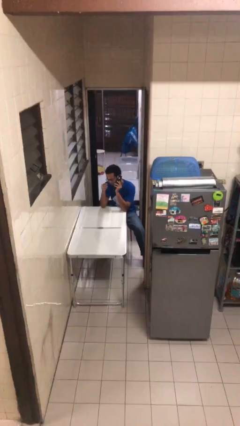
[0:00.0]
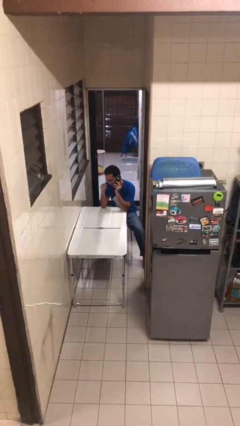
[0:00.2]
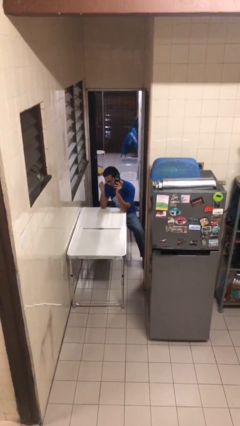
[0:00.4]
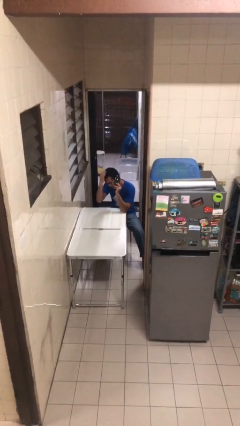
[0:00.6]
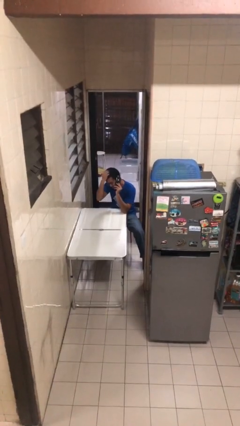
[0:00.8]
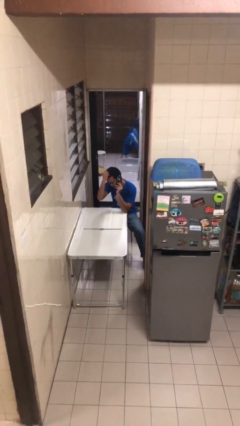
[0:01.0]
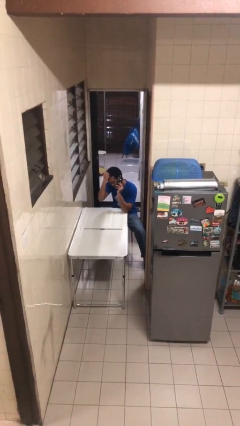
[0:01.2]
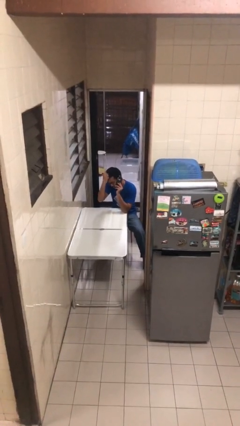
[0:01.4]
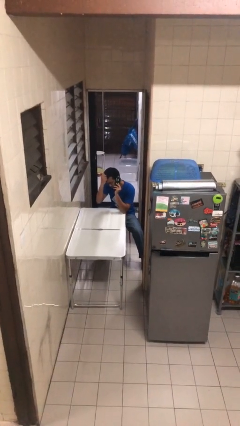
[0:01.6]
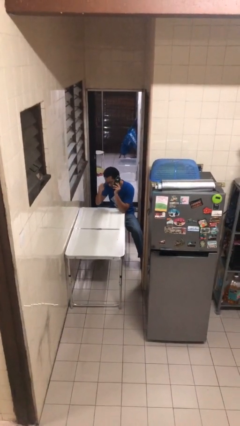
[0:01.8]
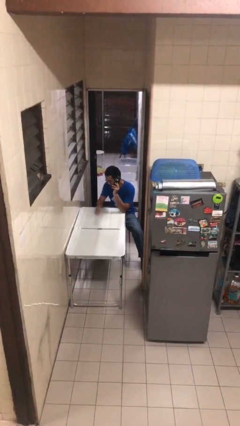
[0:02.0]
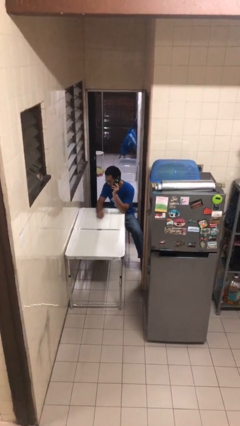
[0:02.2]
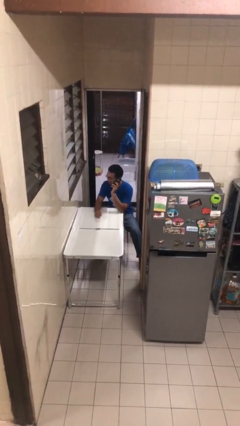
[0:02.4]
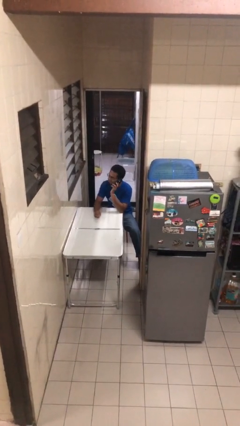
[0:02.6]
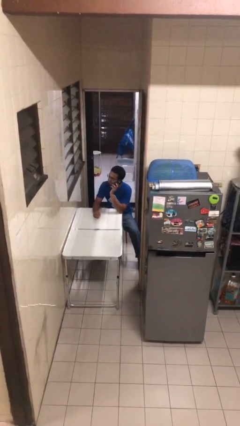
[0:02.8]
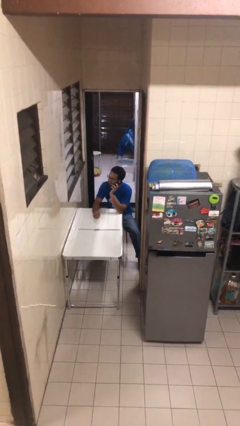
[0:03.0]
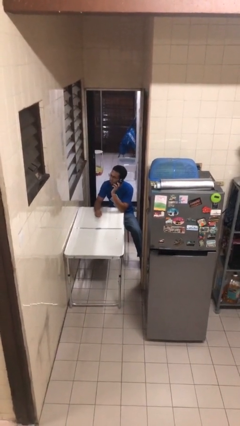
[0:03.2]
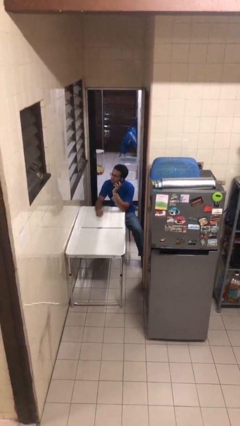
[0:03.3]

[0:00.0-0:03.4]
person talks on phone

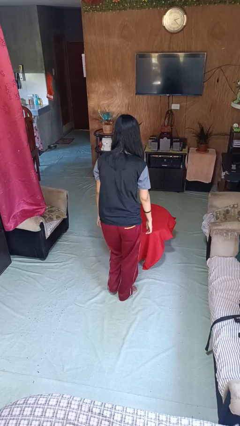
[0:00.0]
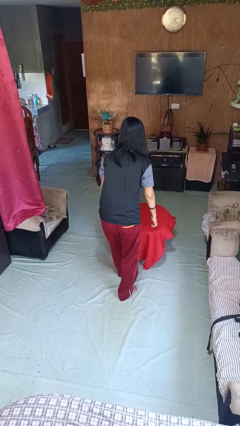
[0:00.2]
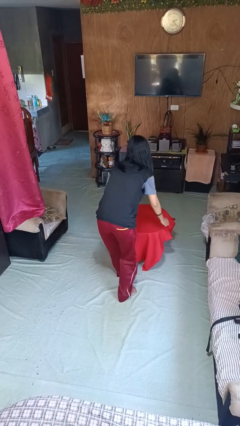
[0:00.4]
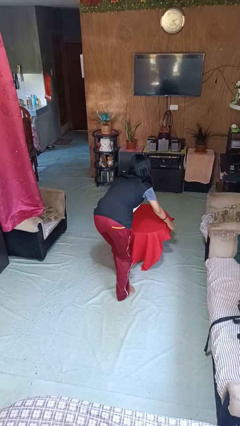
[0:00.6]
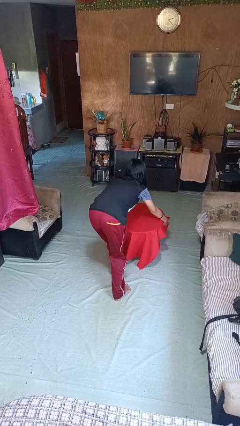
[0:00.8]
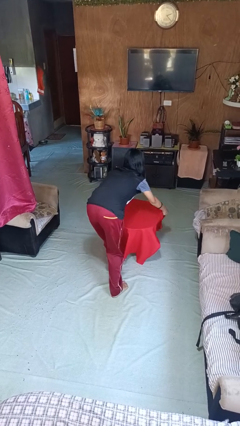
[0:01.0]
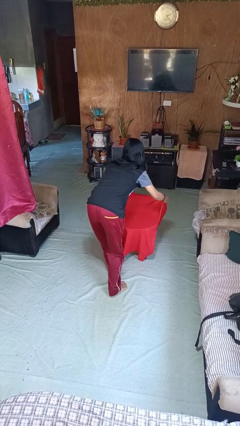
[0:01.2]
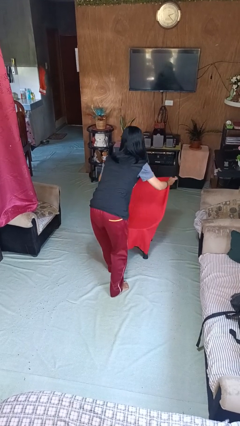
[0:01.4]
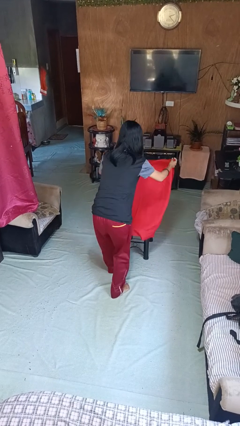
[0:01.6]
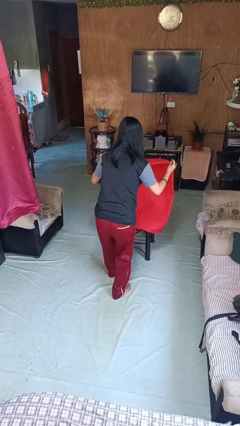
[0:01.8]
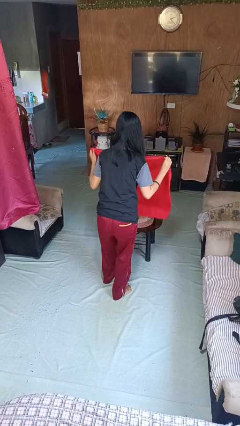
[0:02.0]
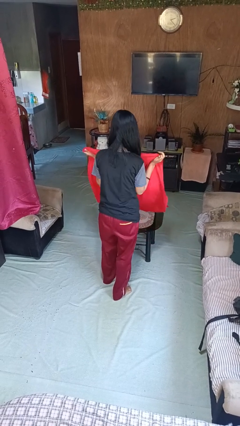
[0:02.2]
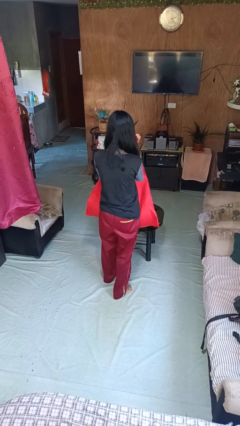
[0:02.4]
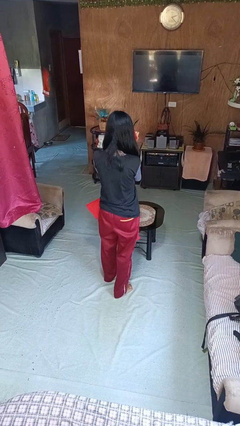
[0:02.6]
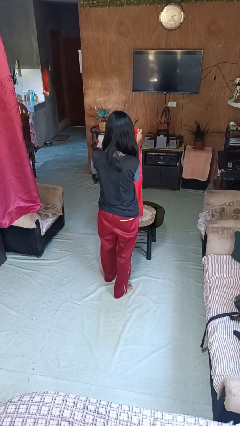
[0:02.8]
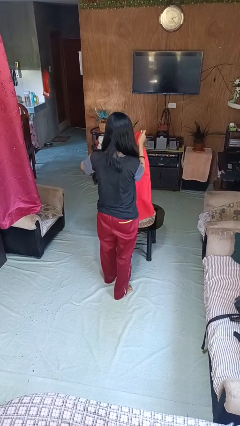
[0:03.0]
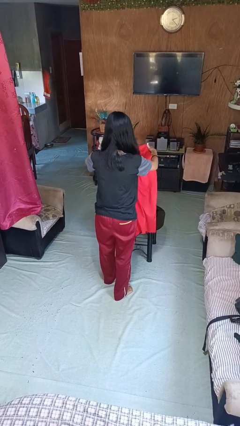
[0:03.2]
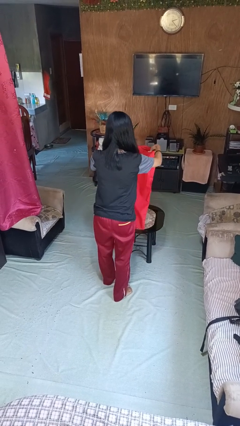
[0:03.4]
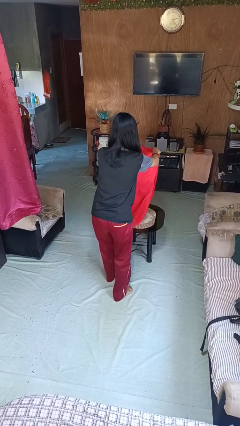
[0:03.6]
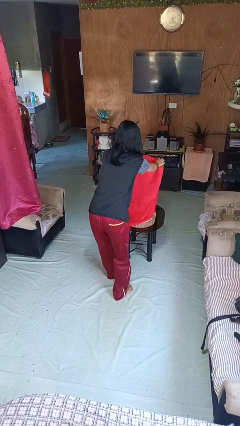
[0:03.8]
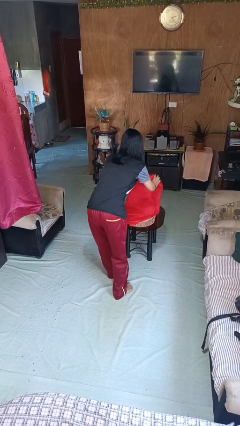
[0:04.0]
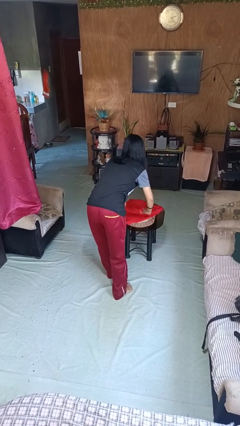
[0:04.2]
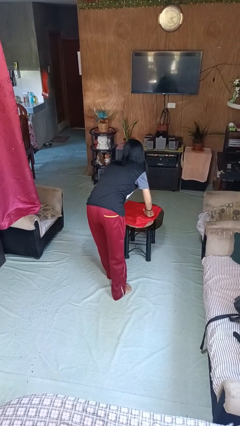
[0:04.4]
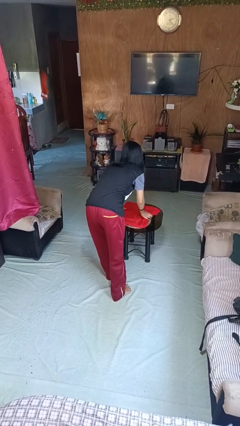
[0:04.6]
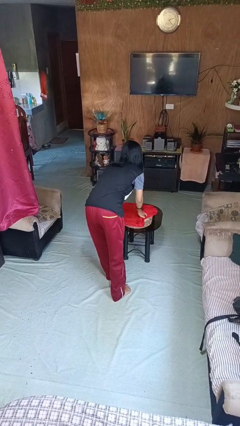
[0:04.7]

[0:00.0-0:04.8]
person folds tablecloth

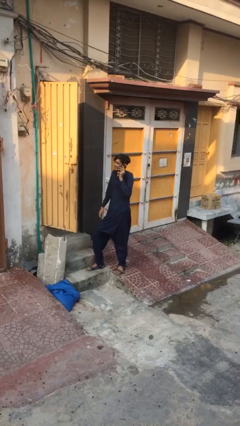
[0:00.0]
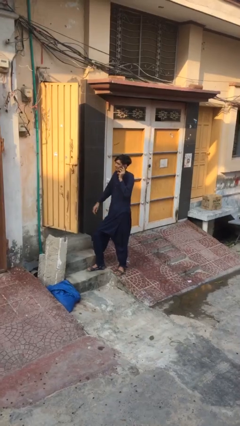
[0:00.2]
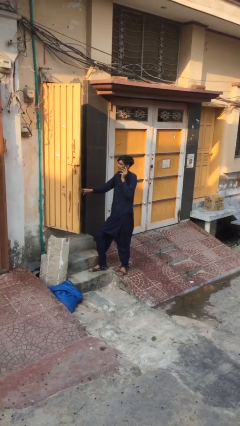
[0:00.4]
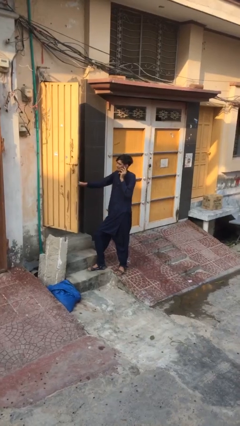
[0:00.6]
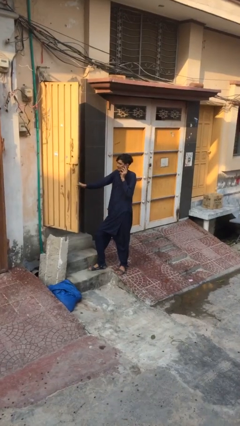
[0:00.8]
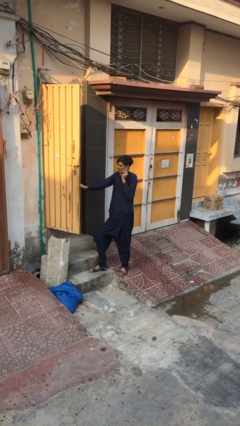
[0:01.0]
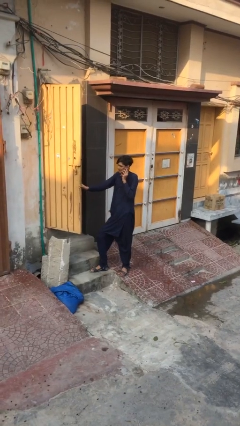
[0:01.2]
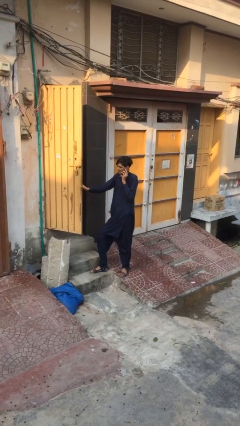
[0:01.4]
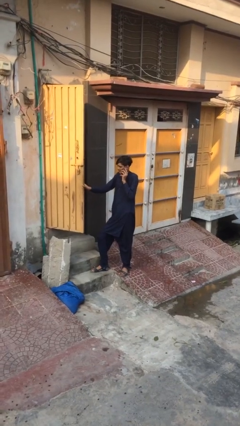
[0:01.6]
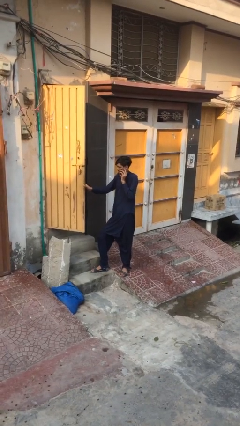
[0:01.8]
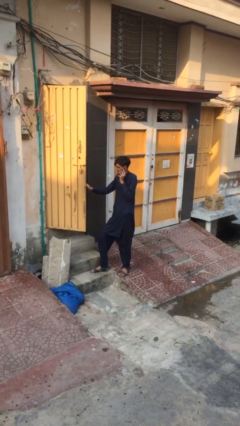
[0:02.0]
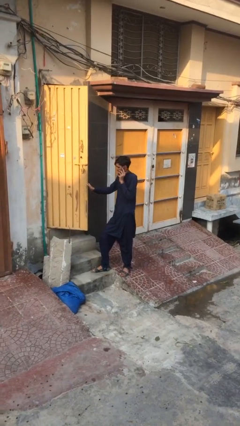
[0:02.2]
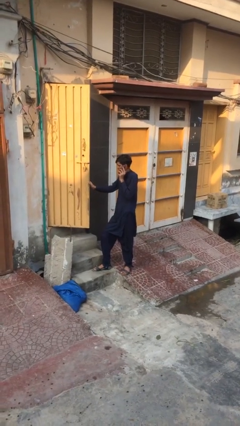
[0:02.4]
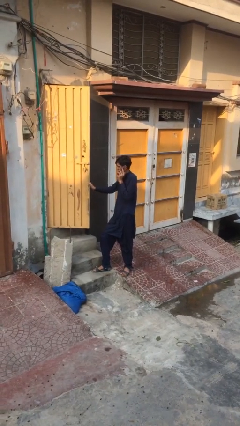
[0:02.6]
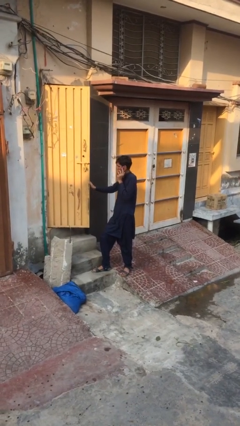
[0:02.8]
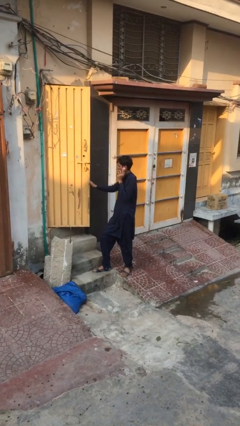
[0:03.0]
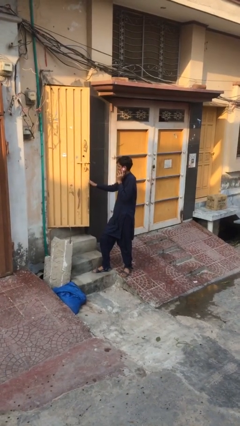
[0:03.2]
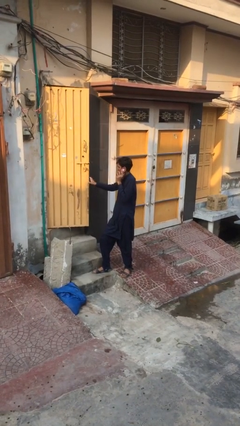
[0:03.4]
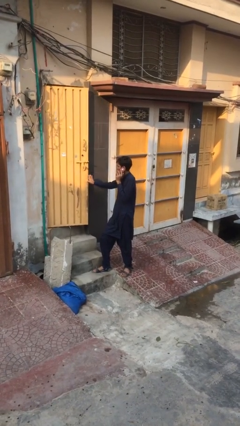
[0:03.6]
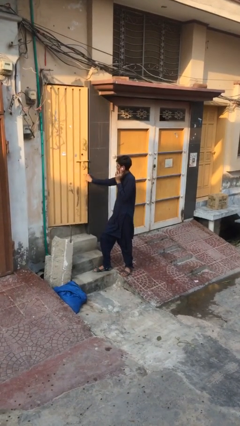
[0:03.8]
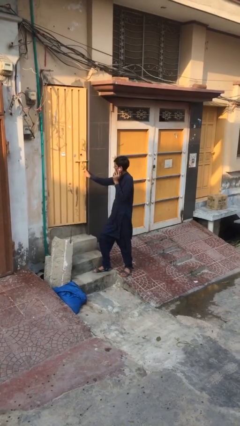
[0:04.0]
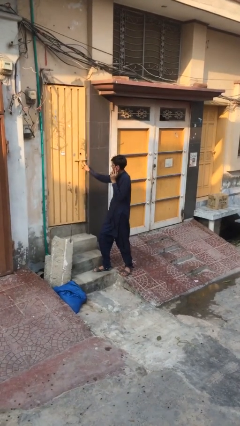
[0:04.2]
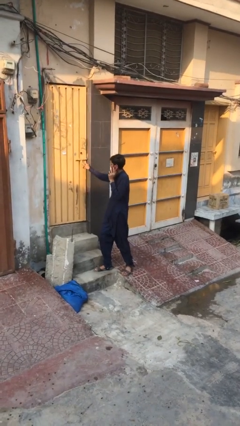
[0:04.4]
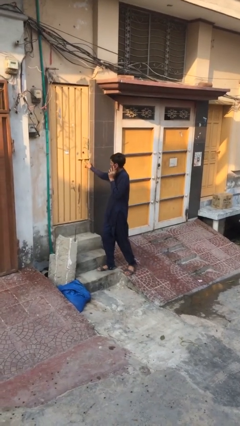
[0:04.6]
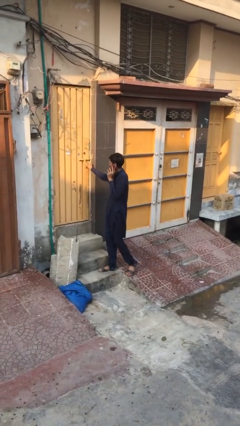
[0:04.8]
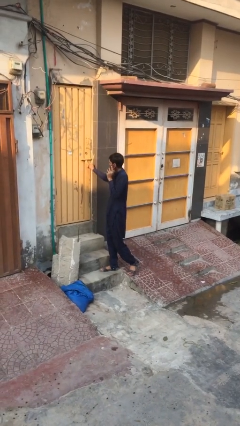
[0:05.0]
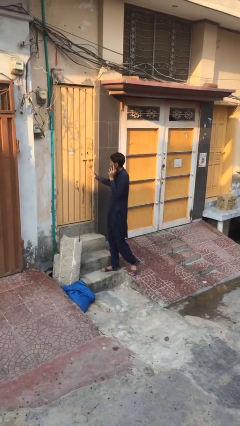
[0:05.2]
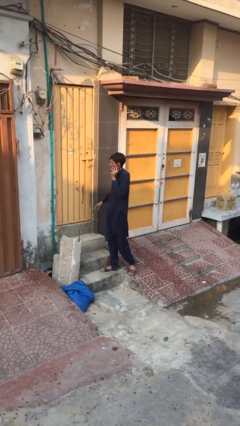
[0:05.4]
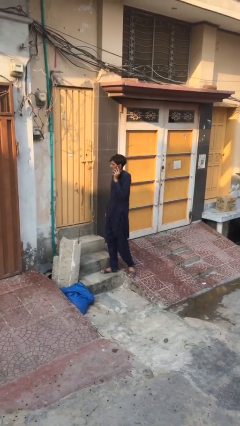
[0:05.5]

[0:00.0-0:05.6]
person closes facility door

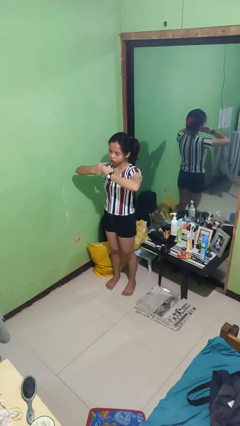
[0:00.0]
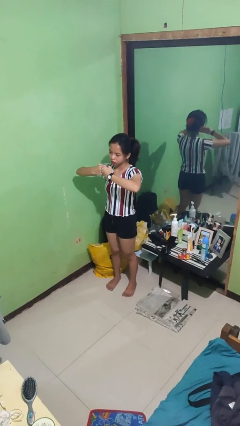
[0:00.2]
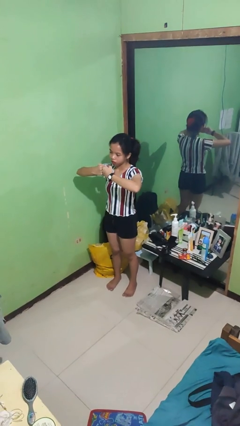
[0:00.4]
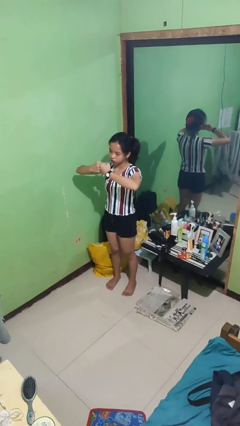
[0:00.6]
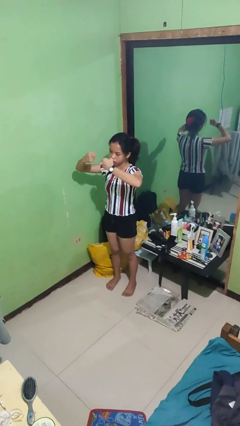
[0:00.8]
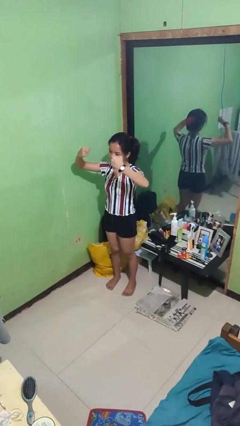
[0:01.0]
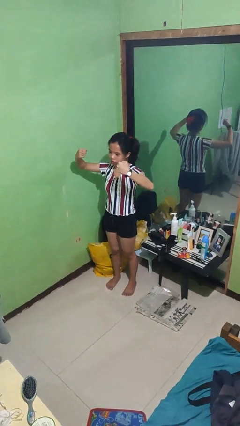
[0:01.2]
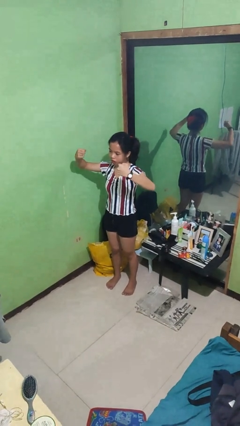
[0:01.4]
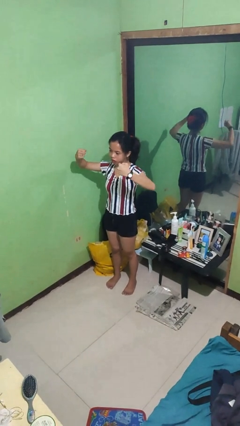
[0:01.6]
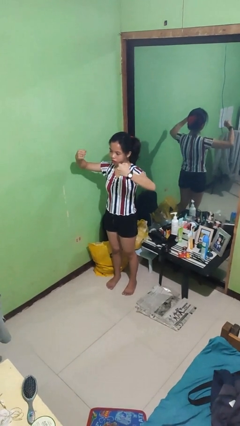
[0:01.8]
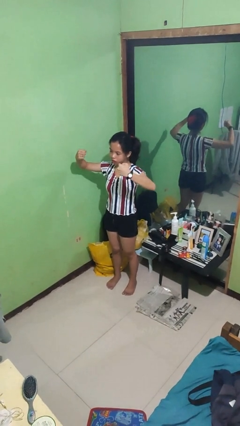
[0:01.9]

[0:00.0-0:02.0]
person gestures zoom in

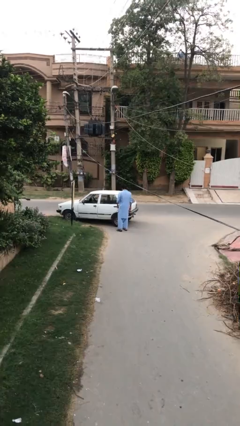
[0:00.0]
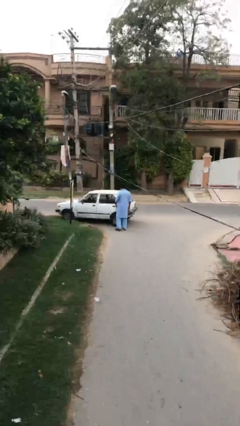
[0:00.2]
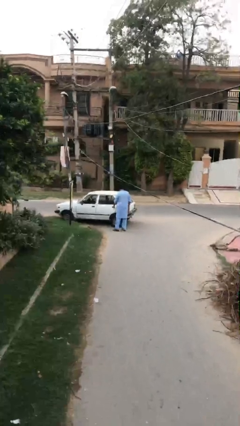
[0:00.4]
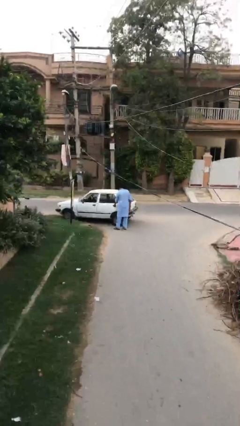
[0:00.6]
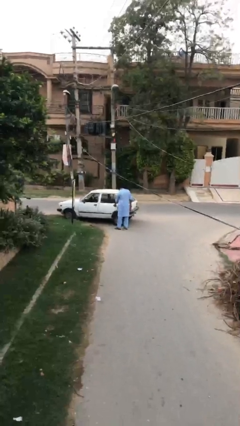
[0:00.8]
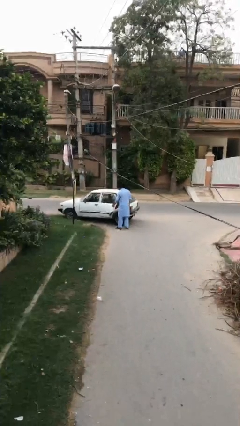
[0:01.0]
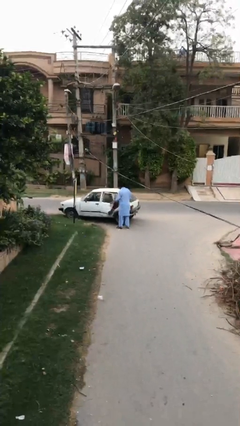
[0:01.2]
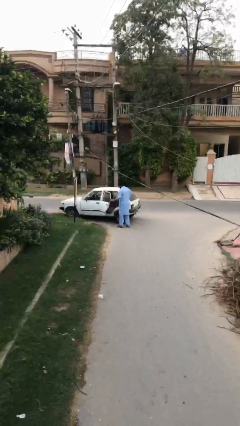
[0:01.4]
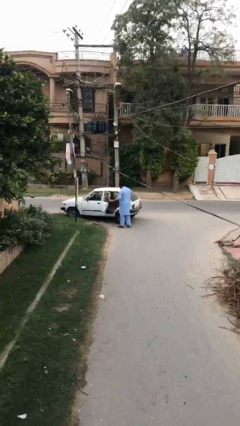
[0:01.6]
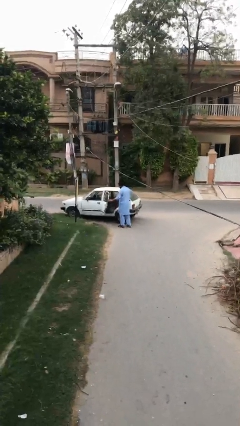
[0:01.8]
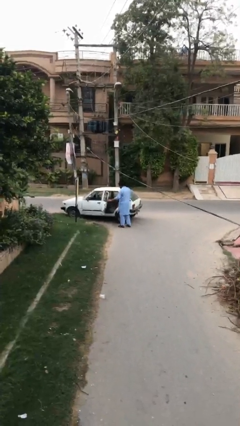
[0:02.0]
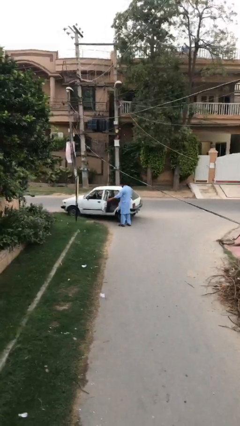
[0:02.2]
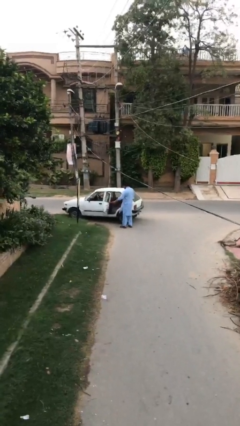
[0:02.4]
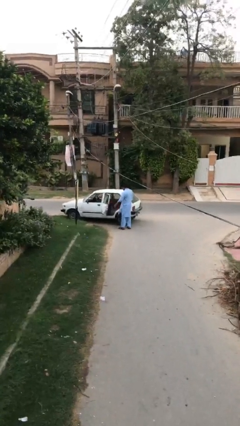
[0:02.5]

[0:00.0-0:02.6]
person opens car door
